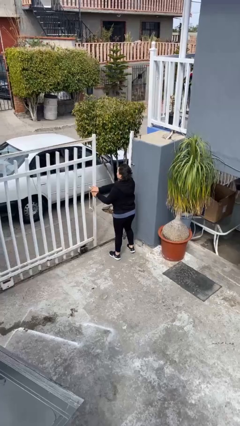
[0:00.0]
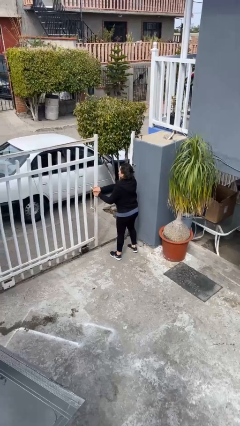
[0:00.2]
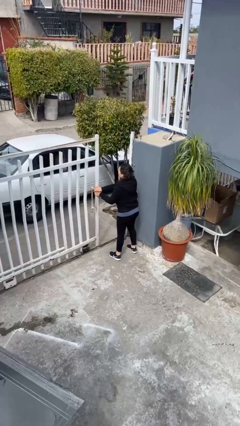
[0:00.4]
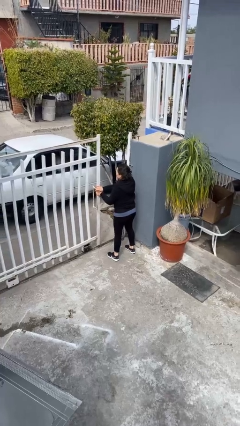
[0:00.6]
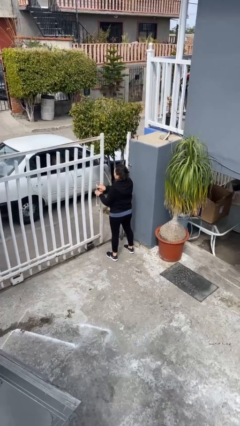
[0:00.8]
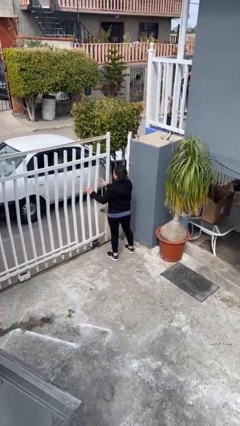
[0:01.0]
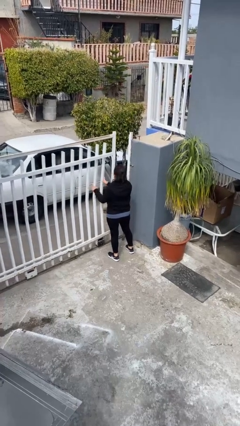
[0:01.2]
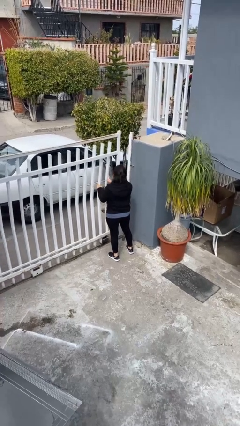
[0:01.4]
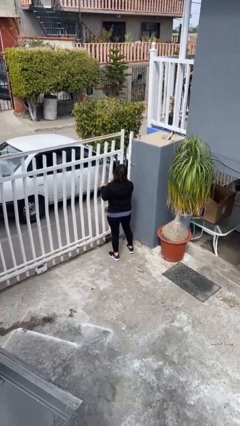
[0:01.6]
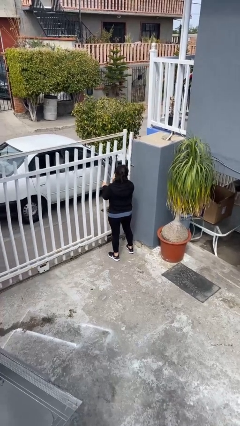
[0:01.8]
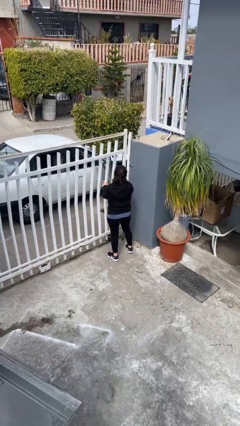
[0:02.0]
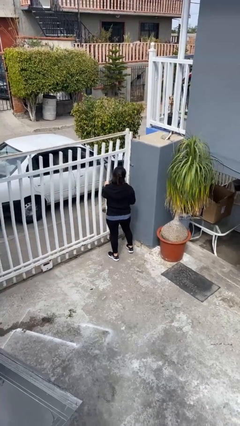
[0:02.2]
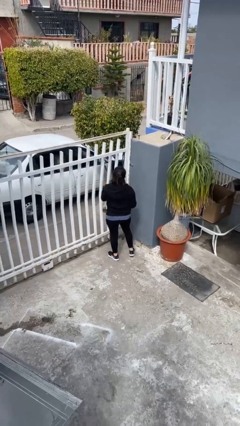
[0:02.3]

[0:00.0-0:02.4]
person closes facility door

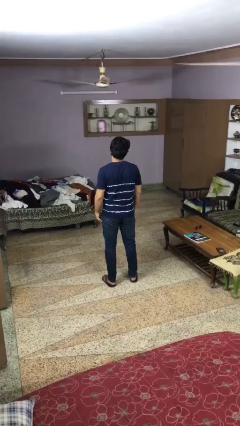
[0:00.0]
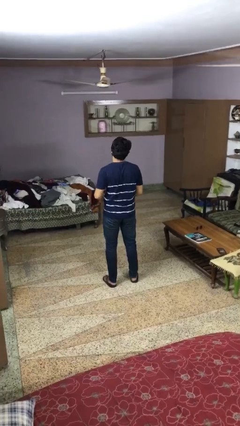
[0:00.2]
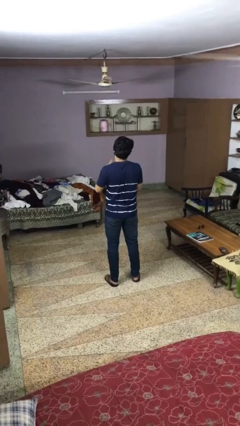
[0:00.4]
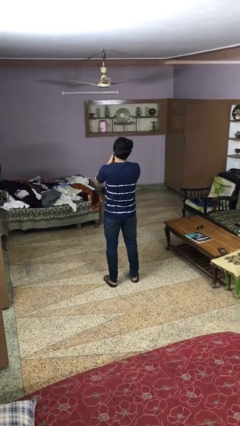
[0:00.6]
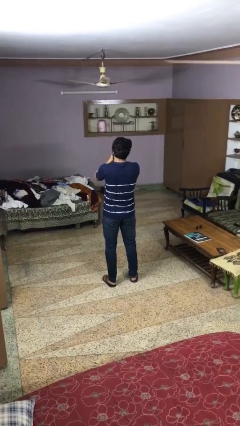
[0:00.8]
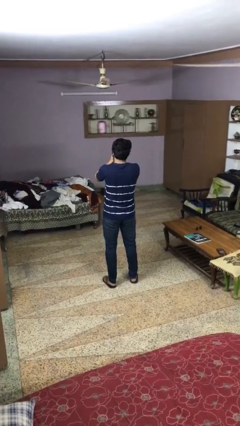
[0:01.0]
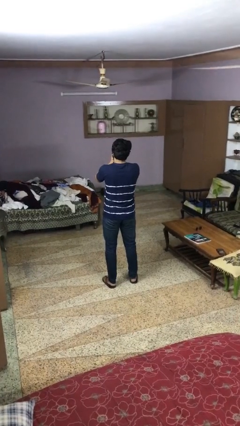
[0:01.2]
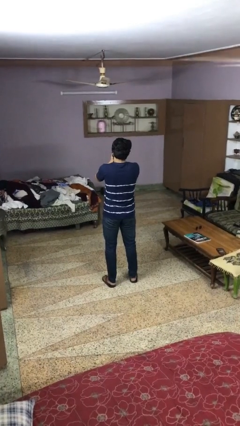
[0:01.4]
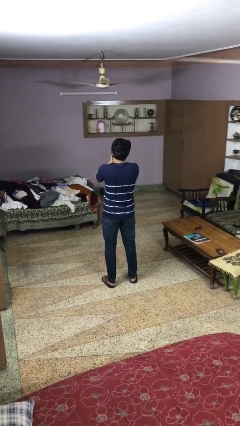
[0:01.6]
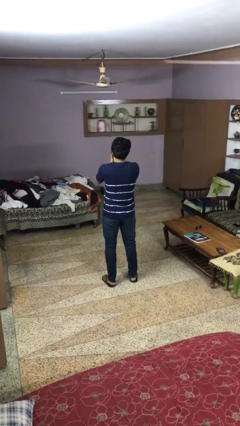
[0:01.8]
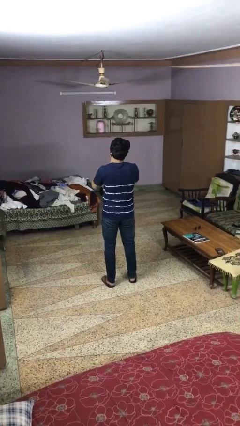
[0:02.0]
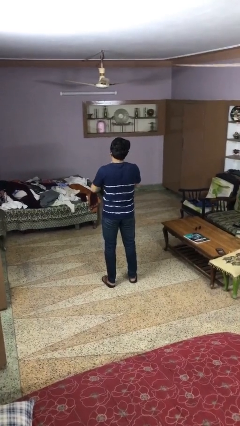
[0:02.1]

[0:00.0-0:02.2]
person covers face with hands

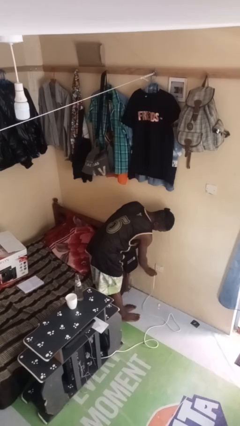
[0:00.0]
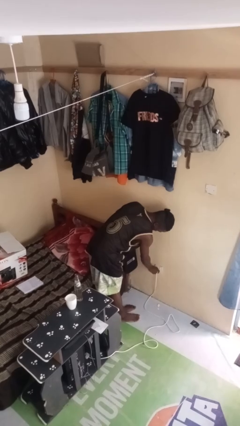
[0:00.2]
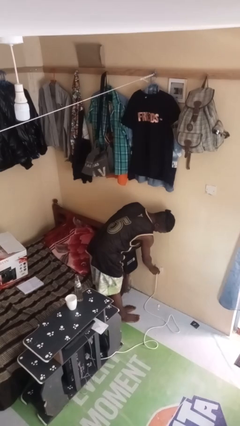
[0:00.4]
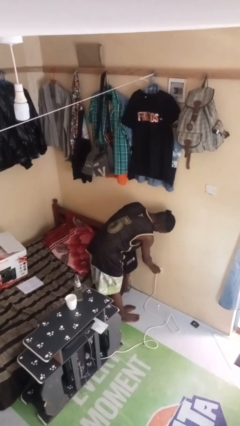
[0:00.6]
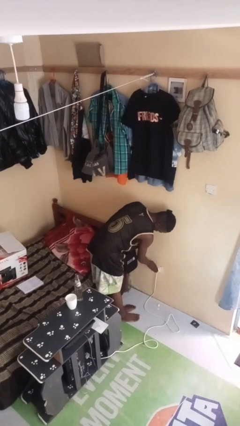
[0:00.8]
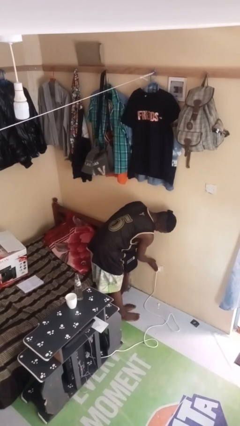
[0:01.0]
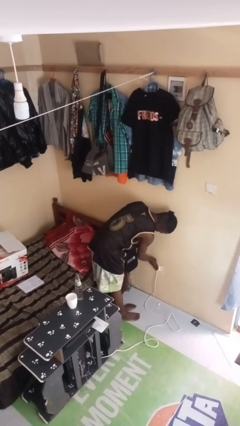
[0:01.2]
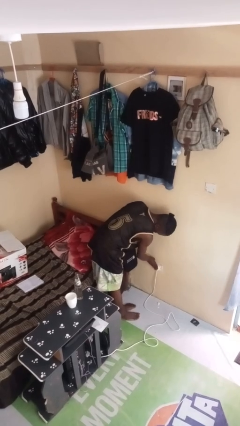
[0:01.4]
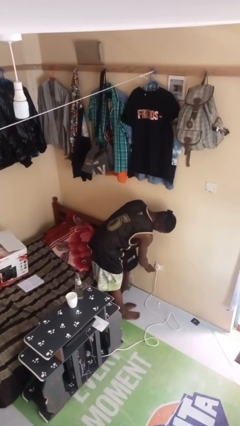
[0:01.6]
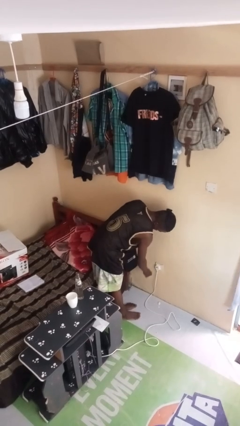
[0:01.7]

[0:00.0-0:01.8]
person plugs into electrical socket

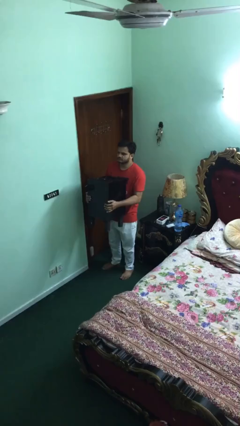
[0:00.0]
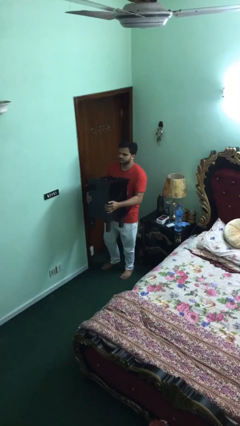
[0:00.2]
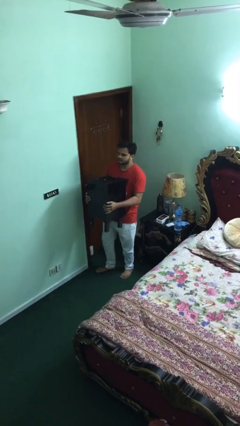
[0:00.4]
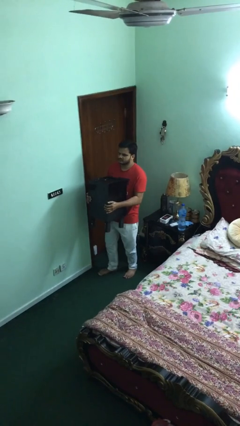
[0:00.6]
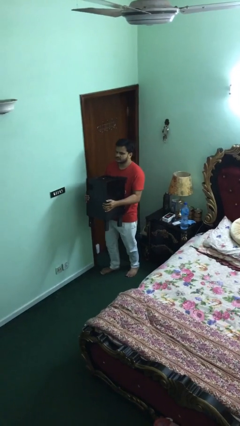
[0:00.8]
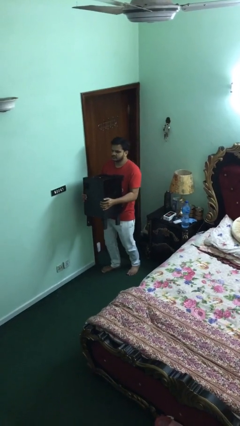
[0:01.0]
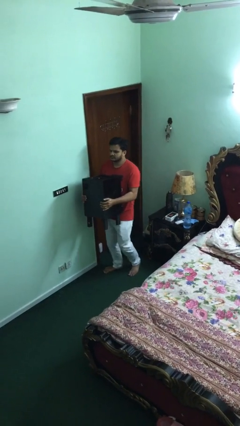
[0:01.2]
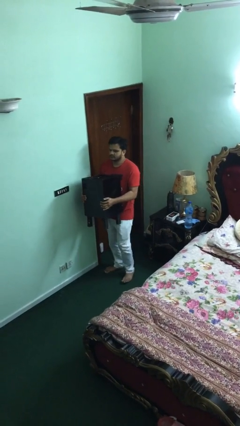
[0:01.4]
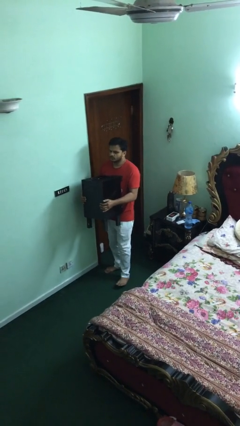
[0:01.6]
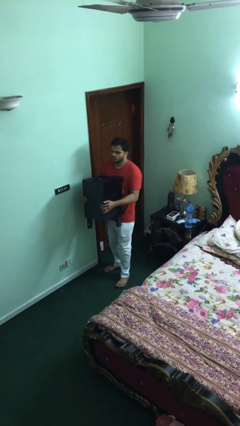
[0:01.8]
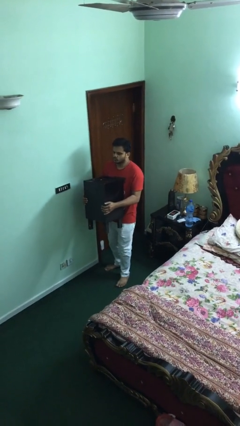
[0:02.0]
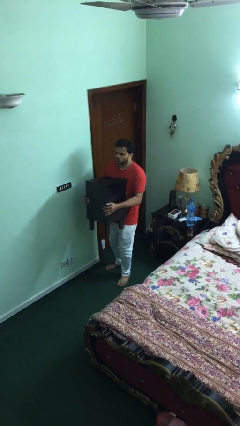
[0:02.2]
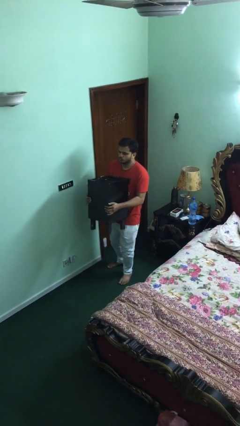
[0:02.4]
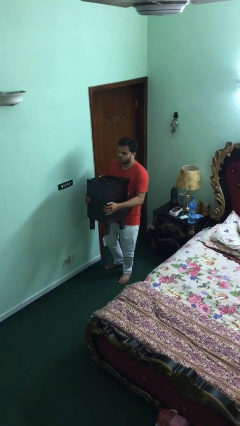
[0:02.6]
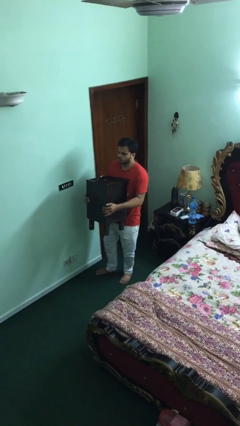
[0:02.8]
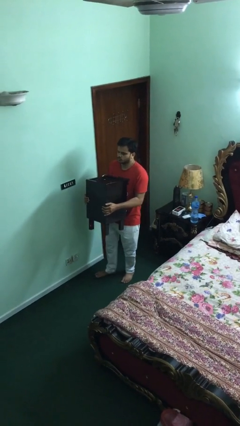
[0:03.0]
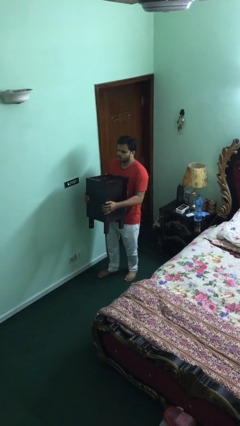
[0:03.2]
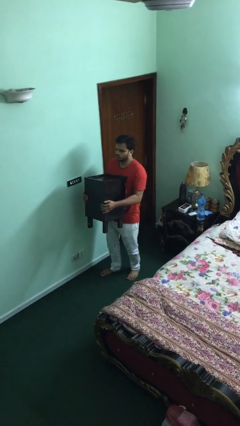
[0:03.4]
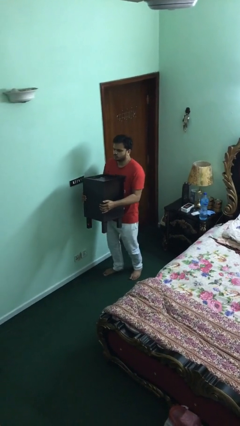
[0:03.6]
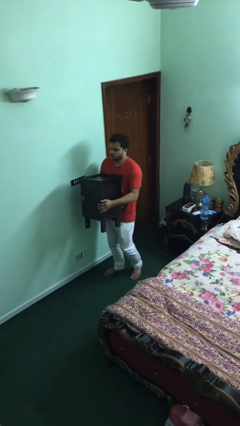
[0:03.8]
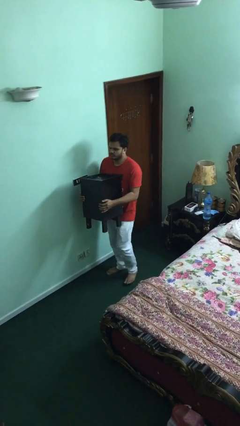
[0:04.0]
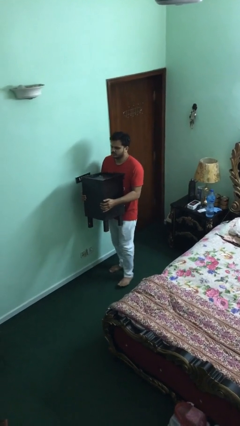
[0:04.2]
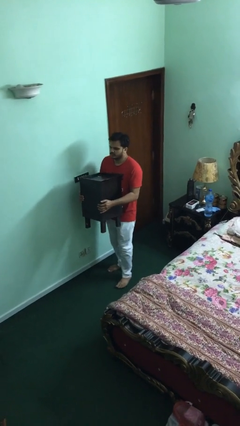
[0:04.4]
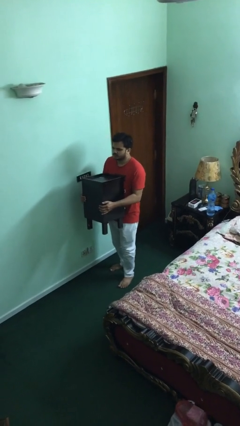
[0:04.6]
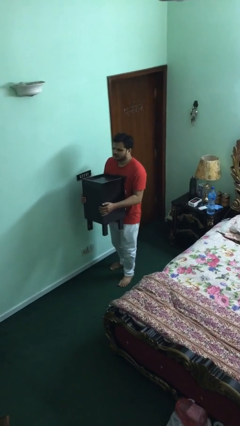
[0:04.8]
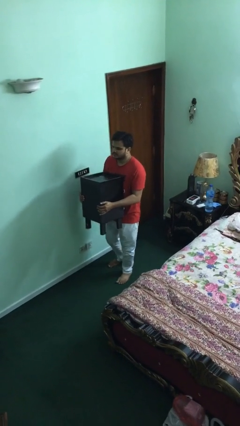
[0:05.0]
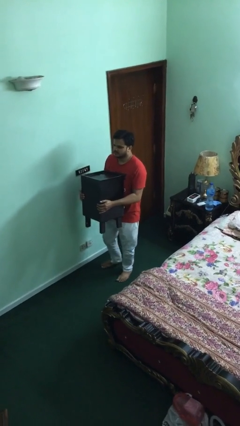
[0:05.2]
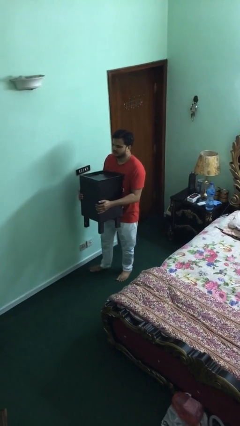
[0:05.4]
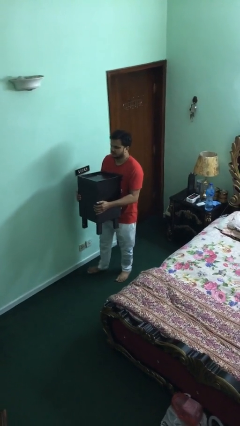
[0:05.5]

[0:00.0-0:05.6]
person carries heavy object

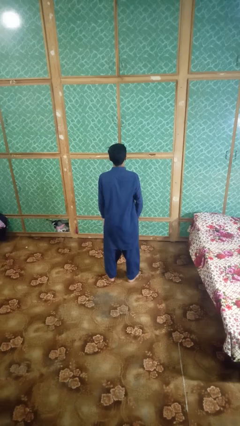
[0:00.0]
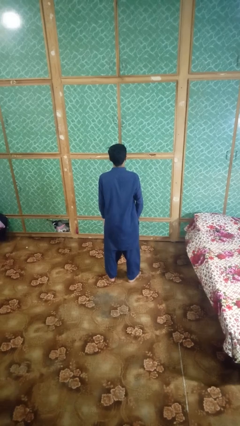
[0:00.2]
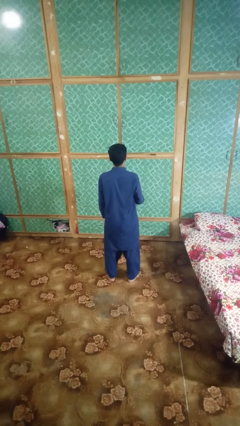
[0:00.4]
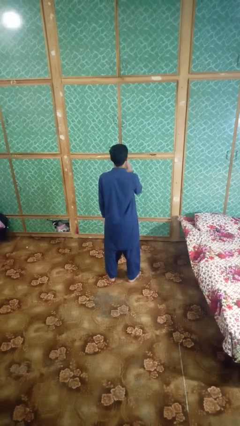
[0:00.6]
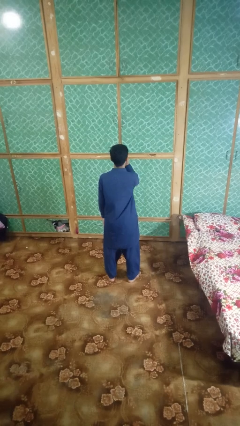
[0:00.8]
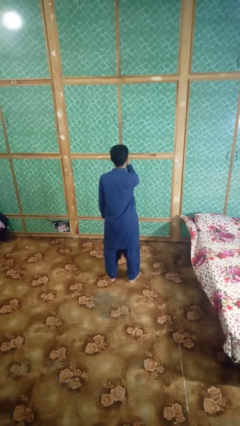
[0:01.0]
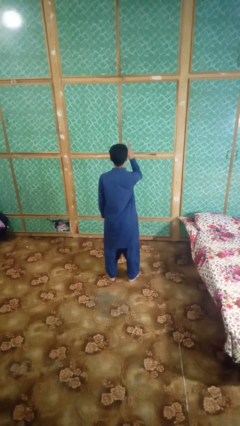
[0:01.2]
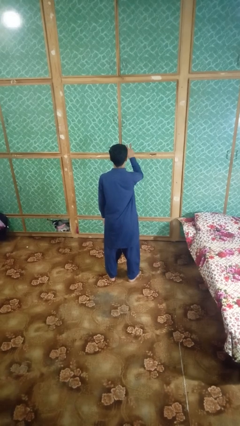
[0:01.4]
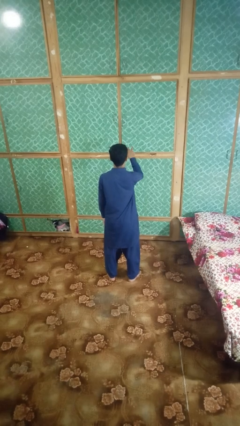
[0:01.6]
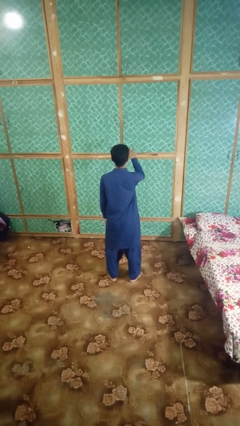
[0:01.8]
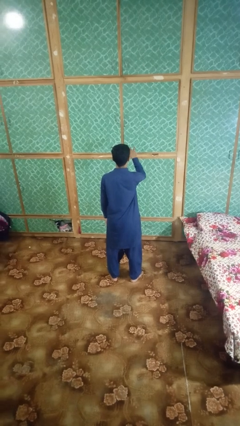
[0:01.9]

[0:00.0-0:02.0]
person gestures watch closely

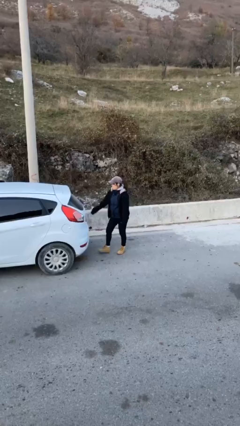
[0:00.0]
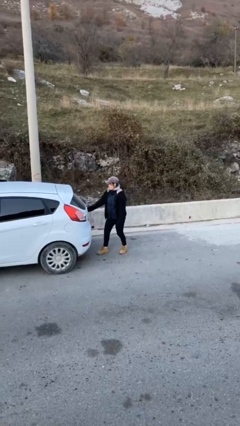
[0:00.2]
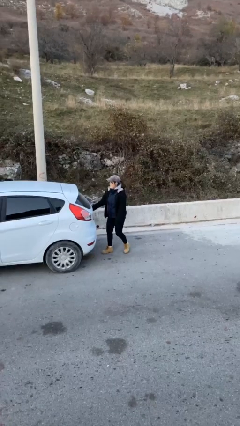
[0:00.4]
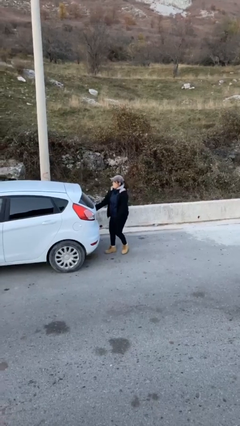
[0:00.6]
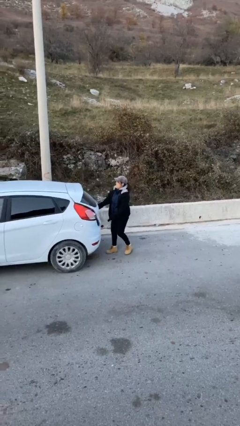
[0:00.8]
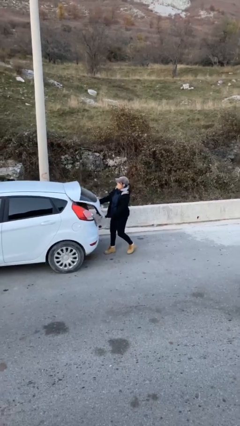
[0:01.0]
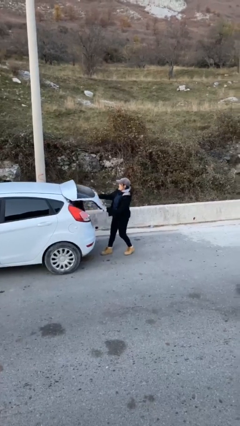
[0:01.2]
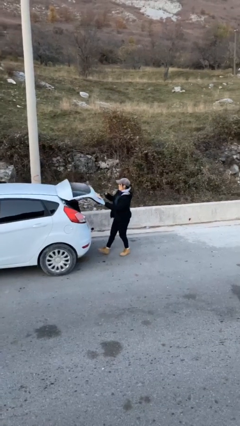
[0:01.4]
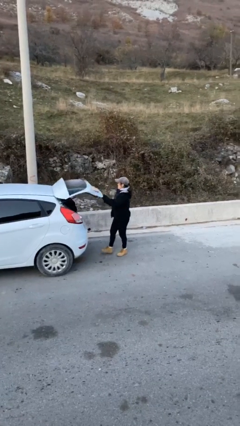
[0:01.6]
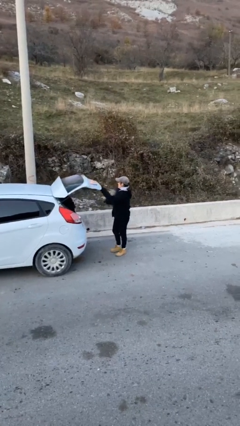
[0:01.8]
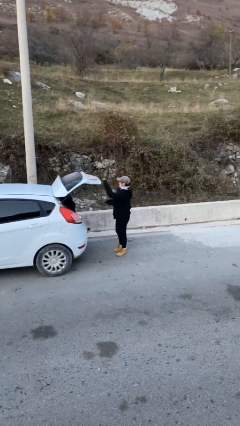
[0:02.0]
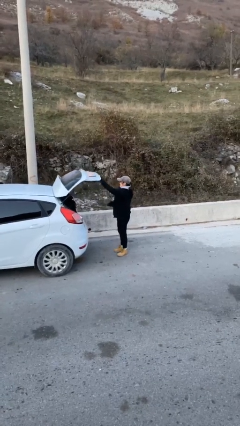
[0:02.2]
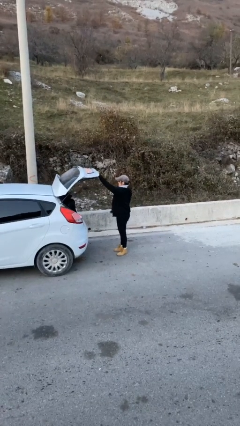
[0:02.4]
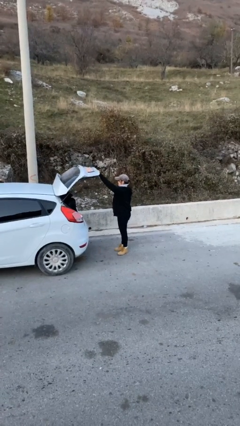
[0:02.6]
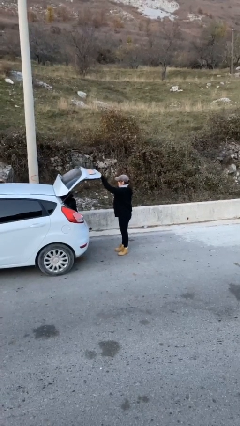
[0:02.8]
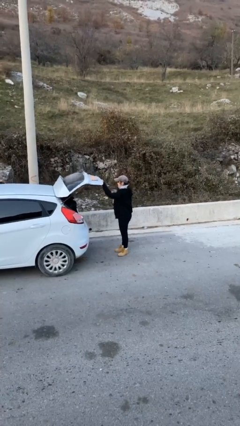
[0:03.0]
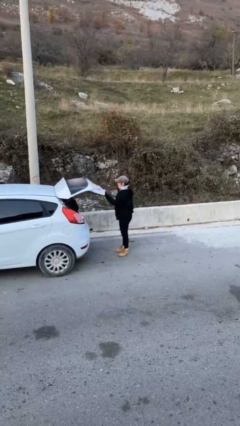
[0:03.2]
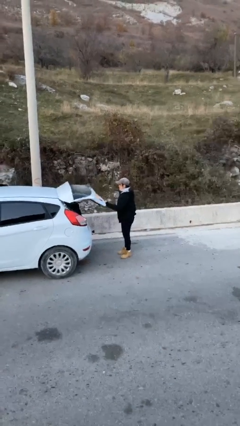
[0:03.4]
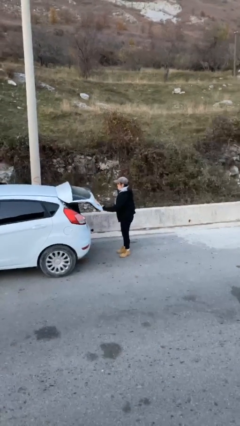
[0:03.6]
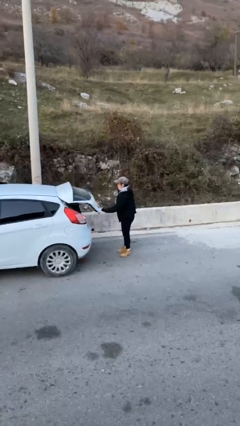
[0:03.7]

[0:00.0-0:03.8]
person opens car trunk
